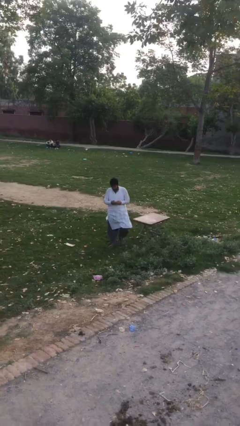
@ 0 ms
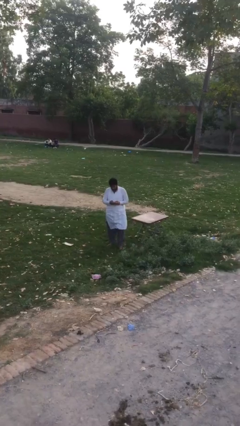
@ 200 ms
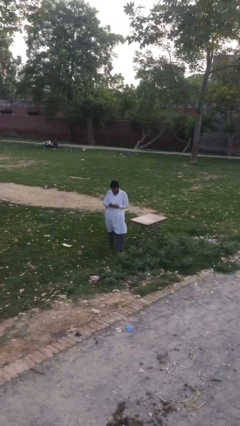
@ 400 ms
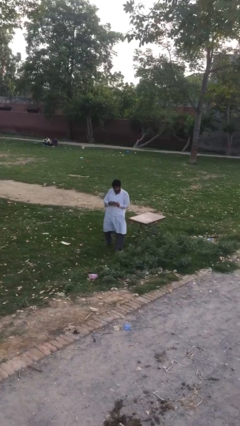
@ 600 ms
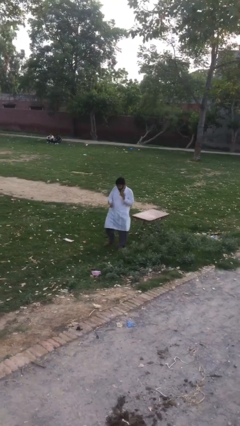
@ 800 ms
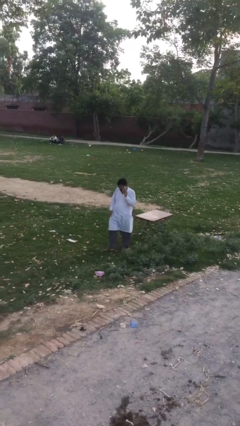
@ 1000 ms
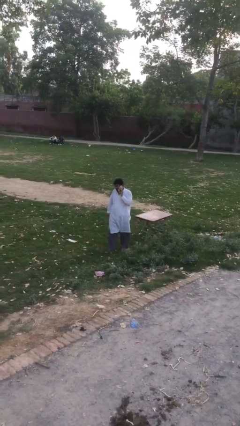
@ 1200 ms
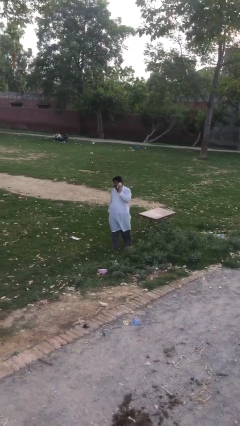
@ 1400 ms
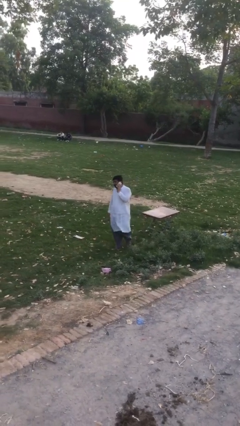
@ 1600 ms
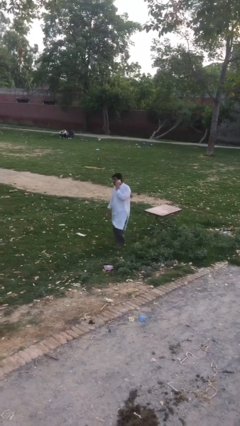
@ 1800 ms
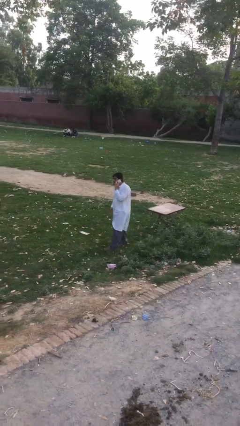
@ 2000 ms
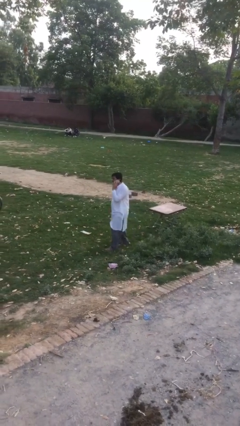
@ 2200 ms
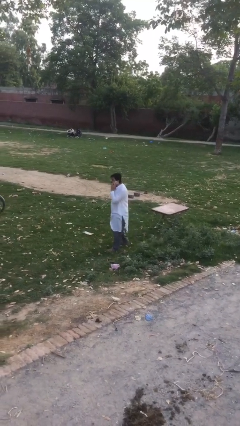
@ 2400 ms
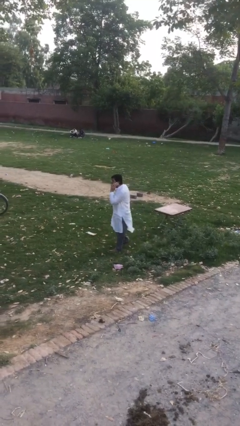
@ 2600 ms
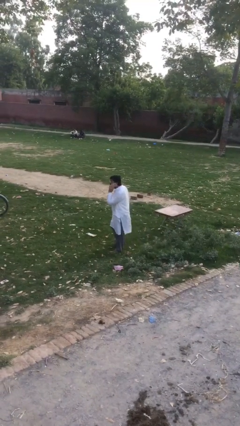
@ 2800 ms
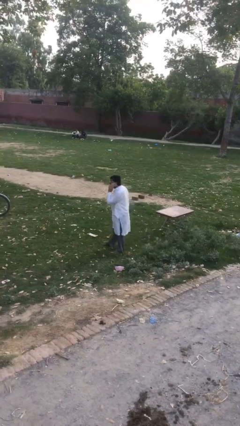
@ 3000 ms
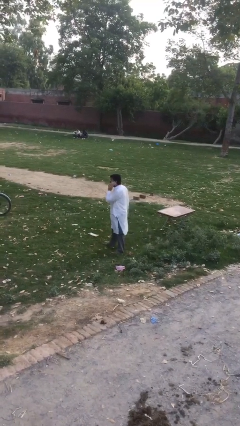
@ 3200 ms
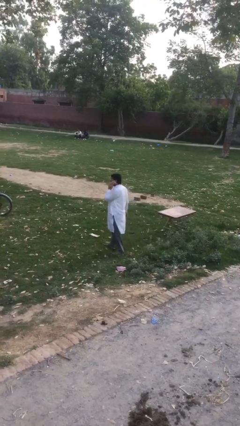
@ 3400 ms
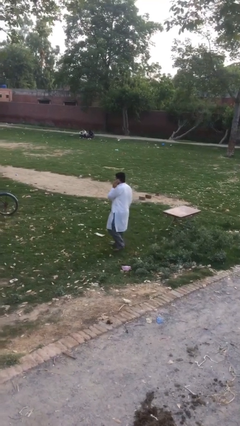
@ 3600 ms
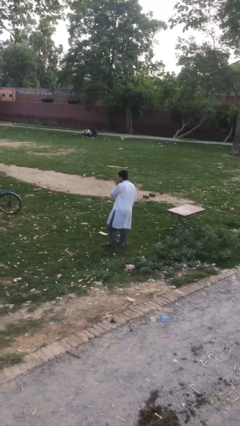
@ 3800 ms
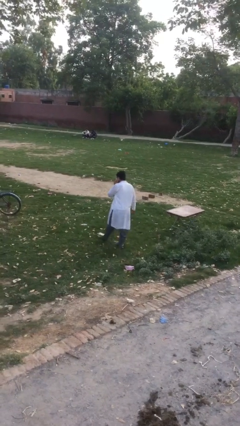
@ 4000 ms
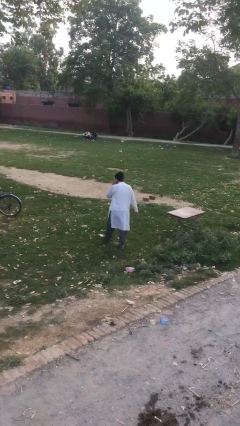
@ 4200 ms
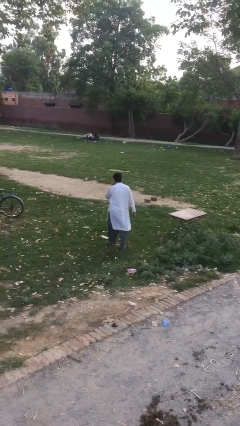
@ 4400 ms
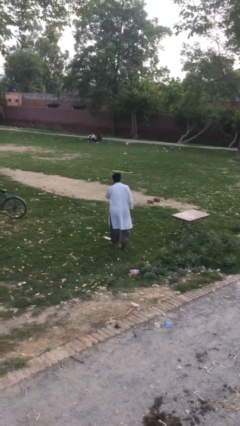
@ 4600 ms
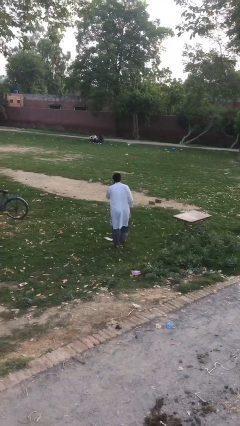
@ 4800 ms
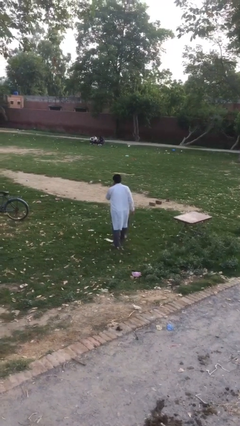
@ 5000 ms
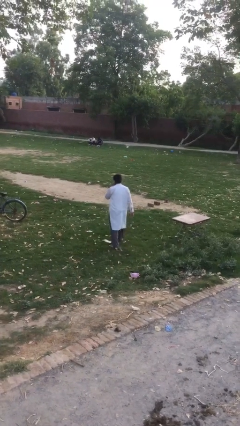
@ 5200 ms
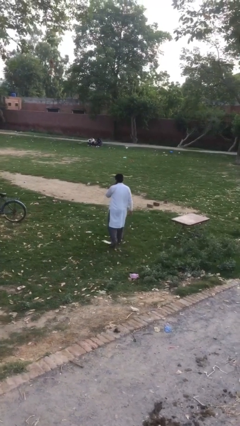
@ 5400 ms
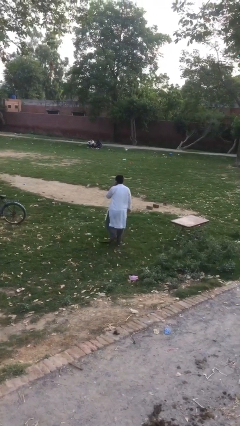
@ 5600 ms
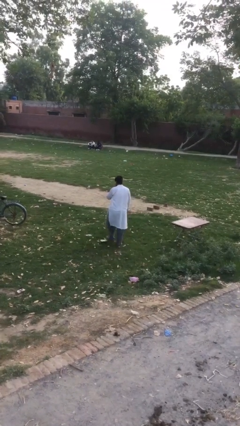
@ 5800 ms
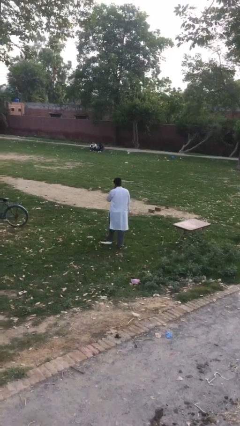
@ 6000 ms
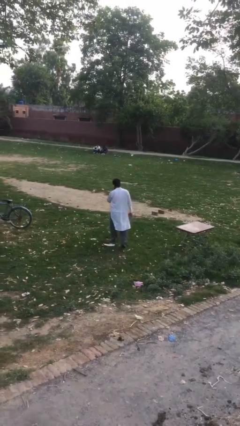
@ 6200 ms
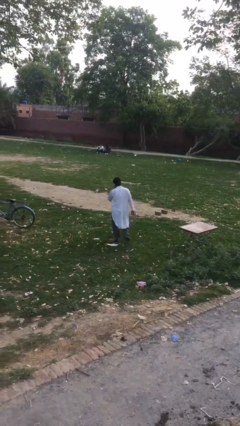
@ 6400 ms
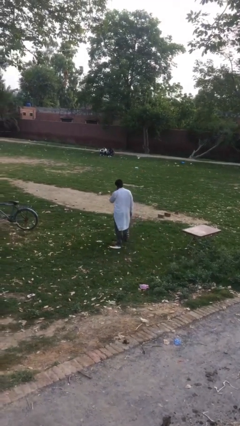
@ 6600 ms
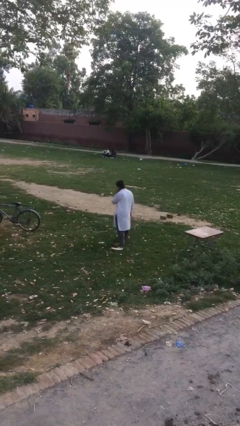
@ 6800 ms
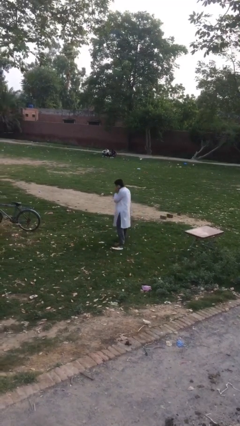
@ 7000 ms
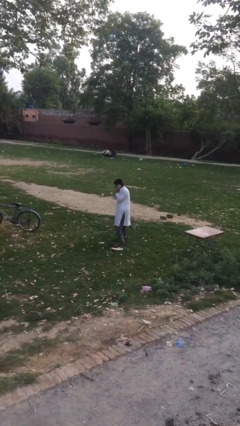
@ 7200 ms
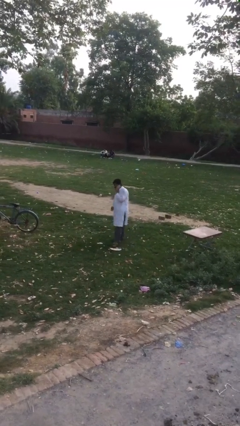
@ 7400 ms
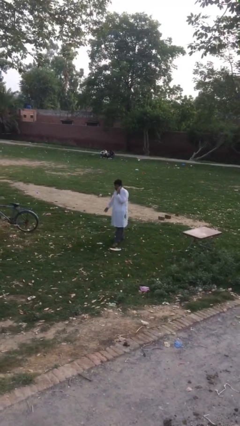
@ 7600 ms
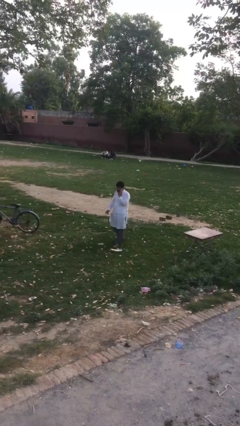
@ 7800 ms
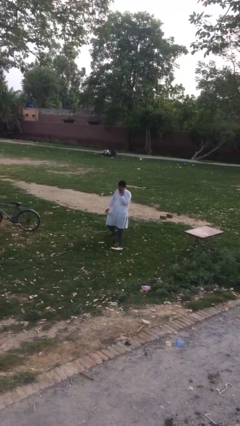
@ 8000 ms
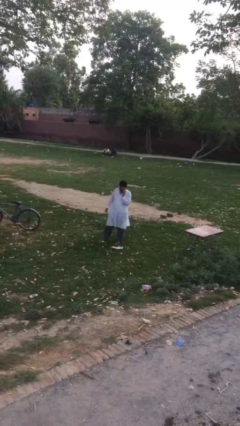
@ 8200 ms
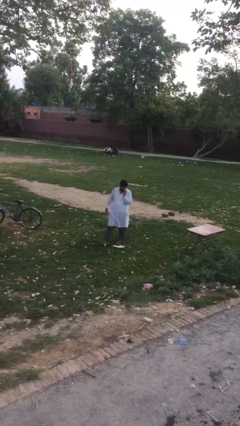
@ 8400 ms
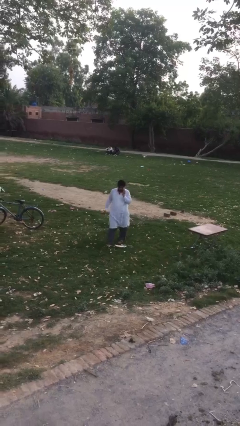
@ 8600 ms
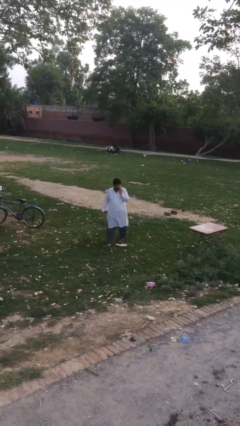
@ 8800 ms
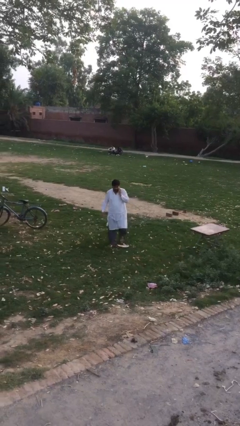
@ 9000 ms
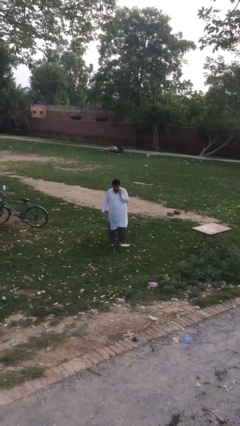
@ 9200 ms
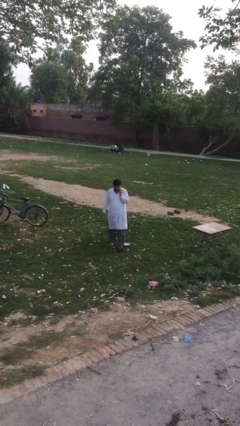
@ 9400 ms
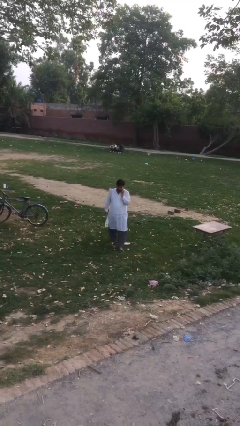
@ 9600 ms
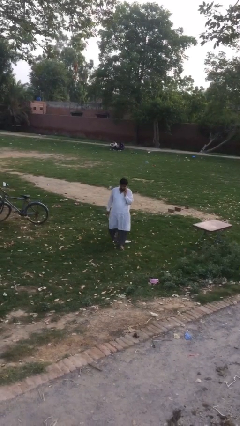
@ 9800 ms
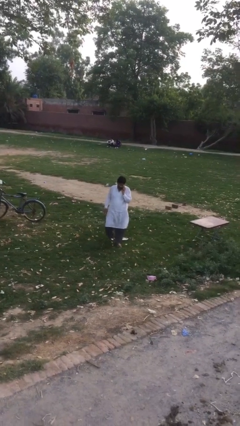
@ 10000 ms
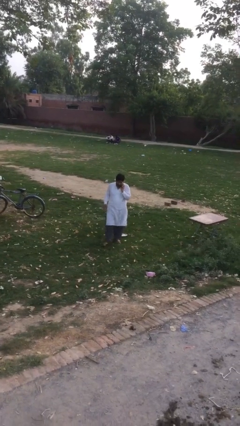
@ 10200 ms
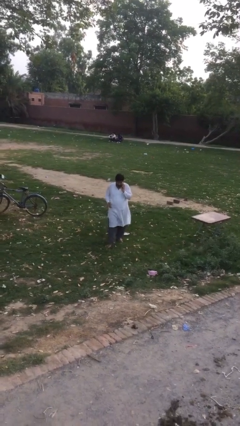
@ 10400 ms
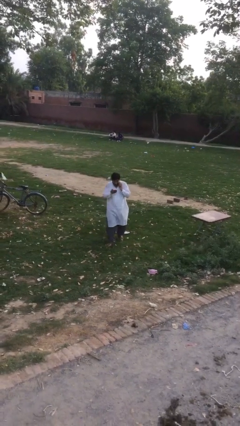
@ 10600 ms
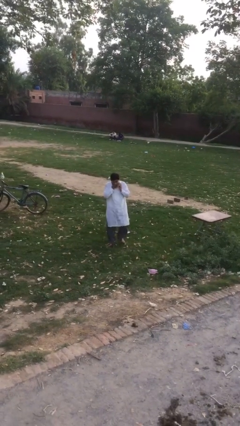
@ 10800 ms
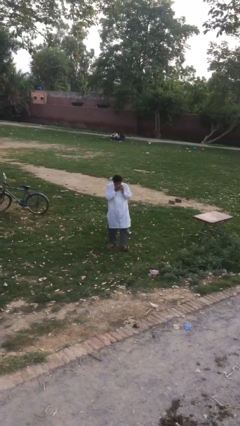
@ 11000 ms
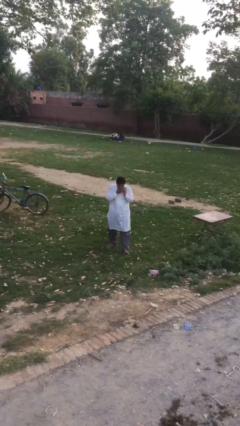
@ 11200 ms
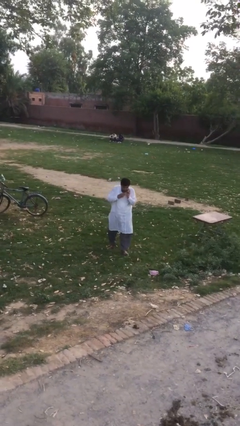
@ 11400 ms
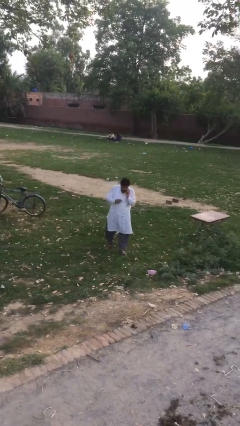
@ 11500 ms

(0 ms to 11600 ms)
person talks on phone

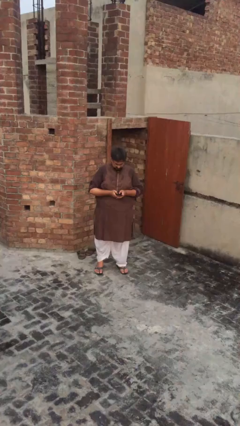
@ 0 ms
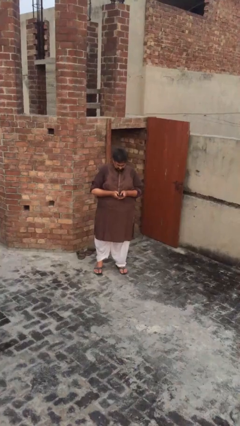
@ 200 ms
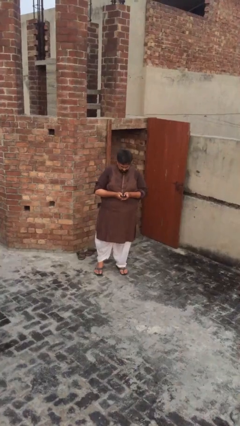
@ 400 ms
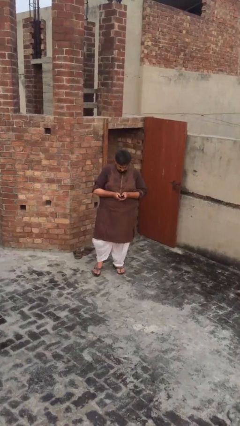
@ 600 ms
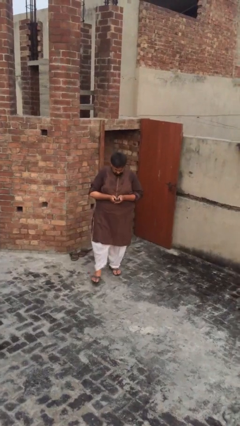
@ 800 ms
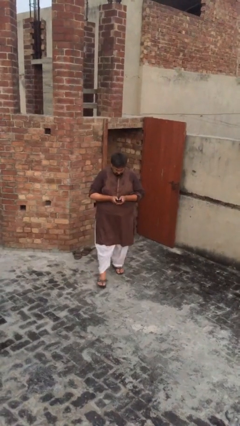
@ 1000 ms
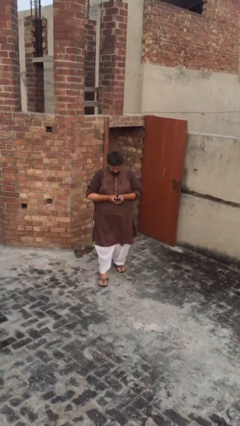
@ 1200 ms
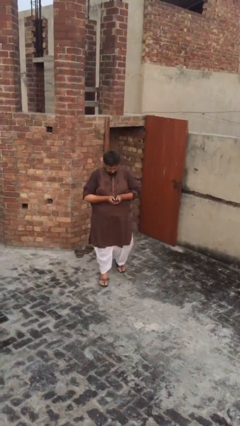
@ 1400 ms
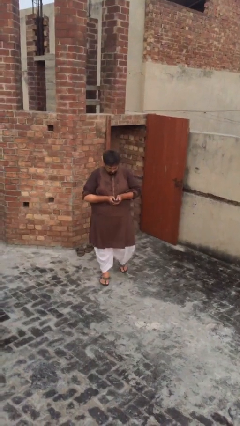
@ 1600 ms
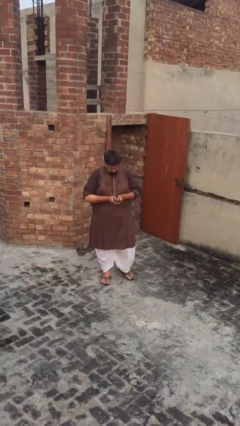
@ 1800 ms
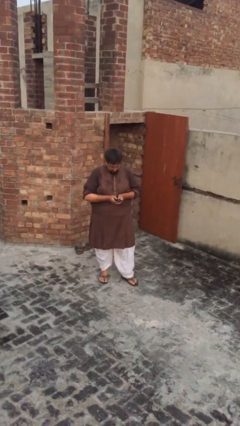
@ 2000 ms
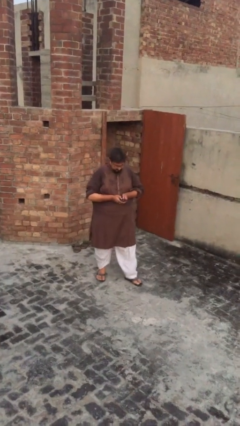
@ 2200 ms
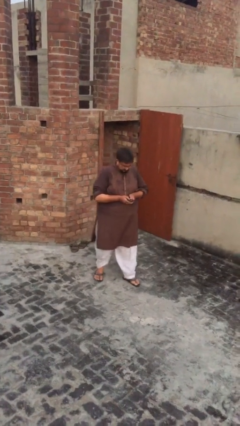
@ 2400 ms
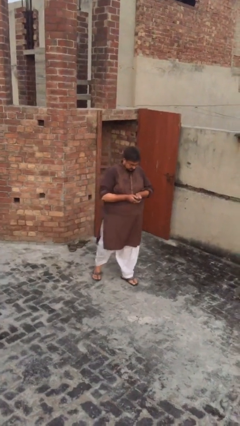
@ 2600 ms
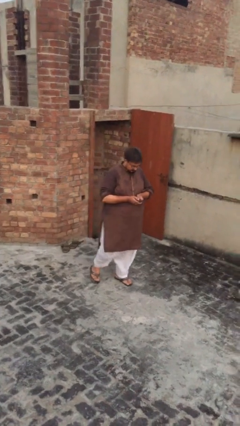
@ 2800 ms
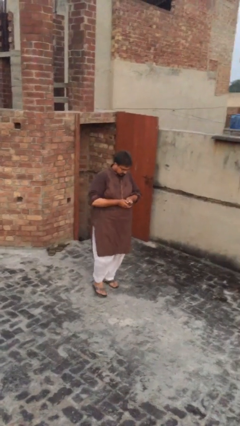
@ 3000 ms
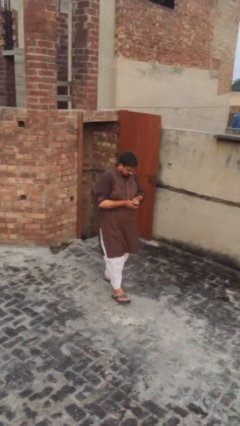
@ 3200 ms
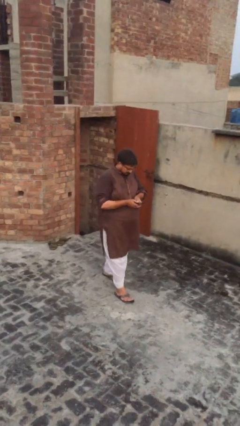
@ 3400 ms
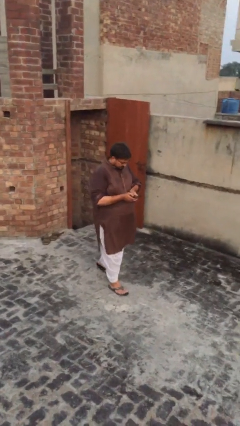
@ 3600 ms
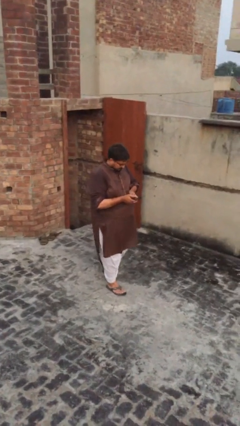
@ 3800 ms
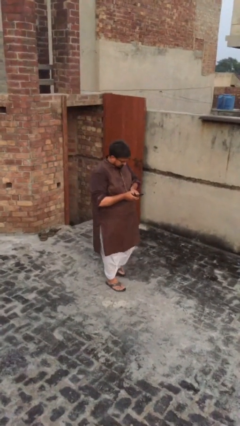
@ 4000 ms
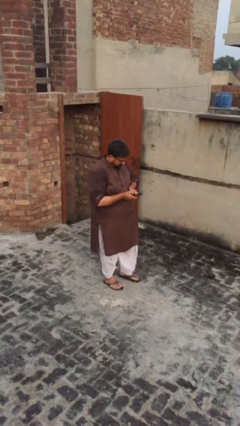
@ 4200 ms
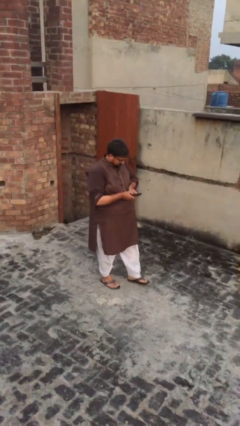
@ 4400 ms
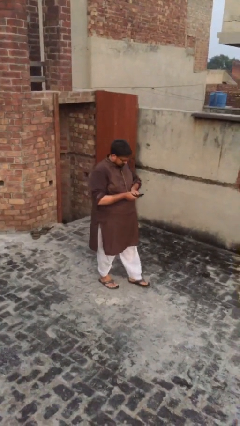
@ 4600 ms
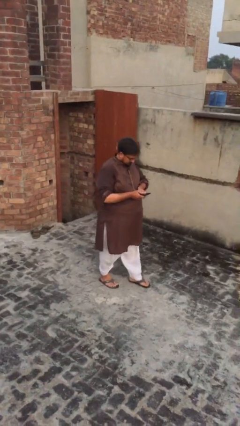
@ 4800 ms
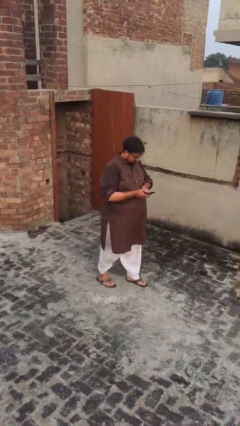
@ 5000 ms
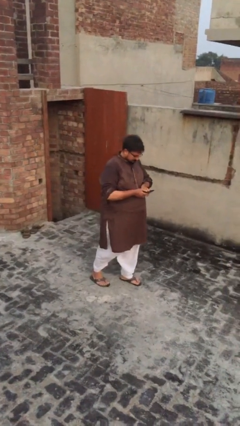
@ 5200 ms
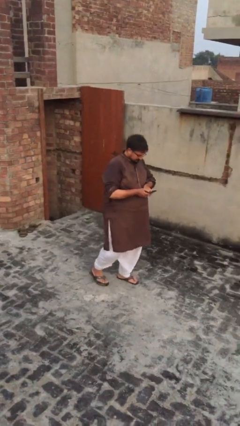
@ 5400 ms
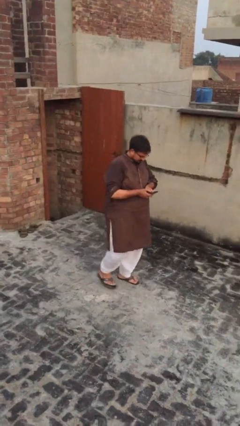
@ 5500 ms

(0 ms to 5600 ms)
person texts on phone

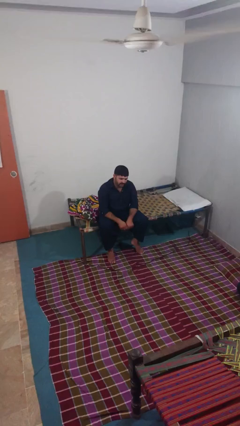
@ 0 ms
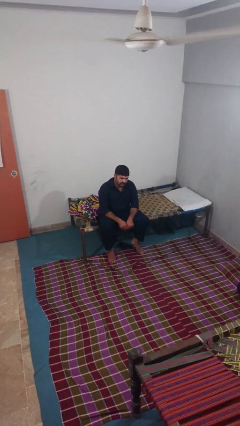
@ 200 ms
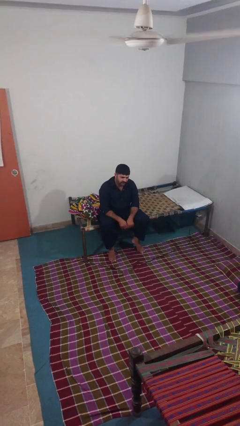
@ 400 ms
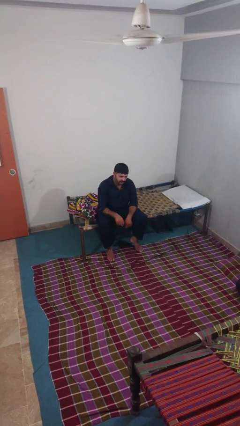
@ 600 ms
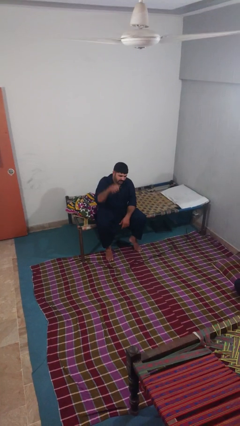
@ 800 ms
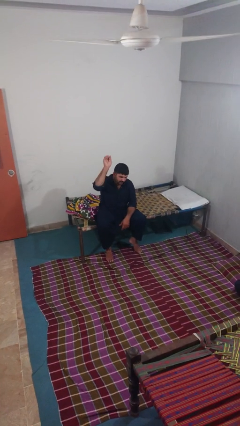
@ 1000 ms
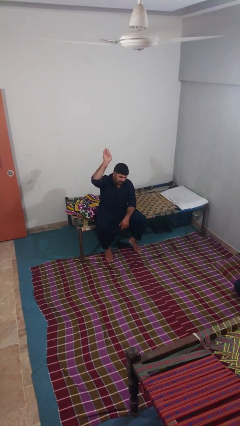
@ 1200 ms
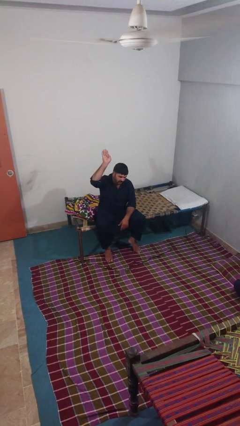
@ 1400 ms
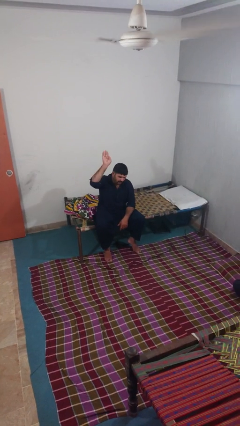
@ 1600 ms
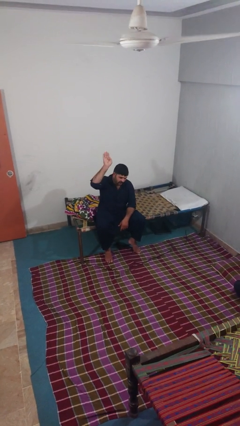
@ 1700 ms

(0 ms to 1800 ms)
person gestures swipe up
